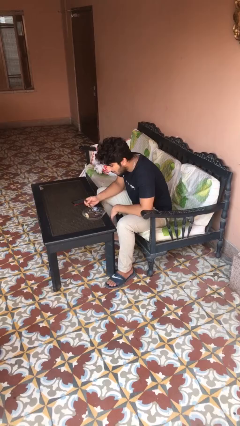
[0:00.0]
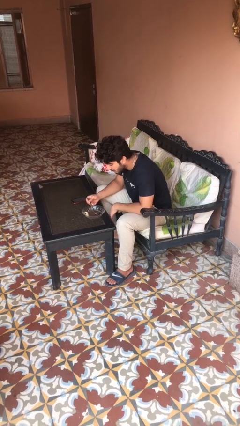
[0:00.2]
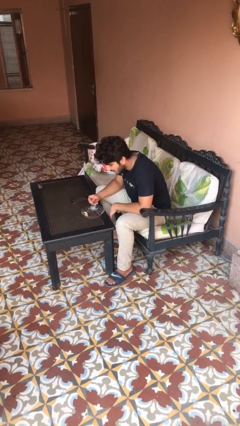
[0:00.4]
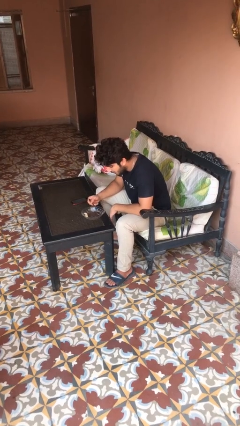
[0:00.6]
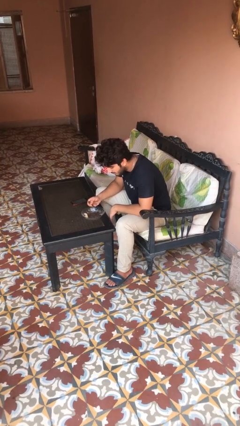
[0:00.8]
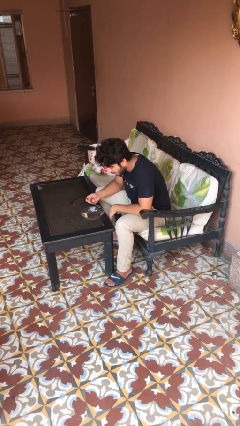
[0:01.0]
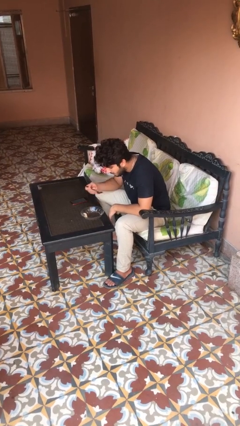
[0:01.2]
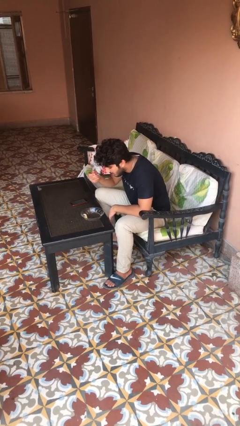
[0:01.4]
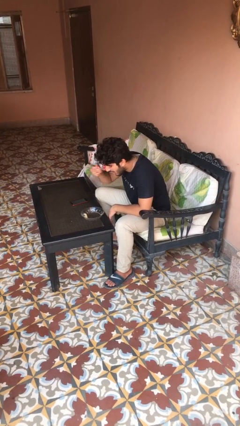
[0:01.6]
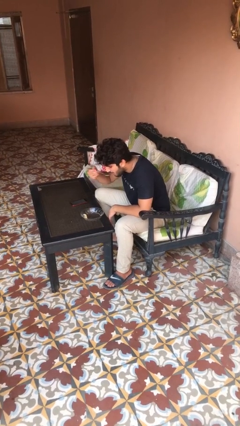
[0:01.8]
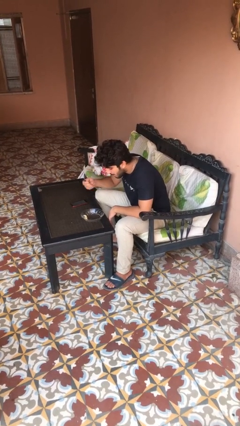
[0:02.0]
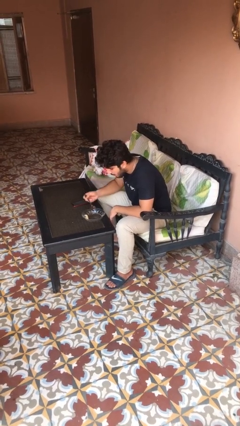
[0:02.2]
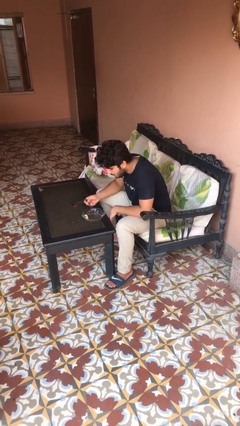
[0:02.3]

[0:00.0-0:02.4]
person eats with utensil

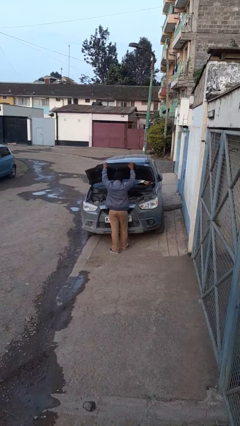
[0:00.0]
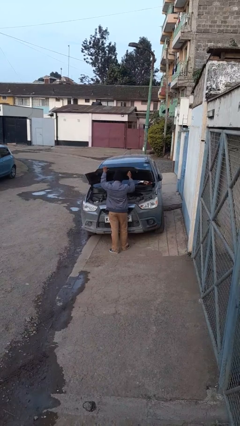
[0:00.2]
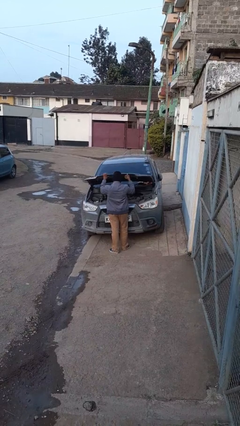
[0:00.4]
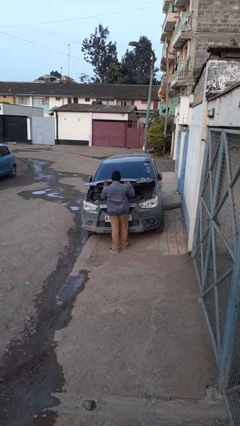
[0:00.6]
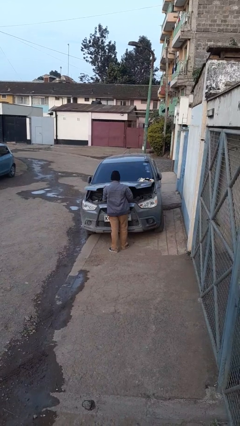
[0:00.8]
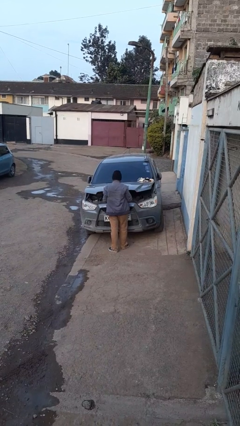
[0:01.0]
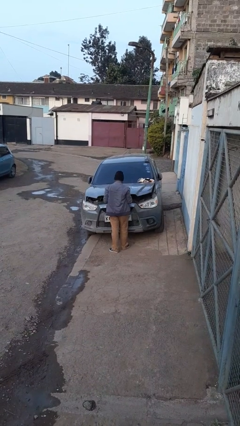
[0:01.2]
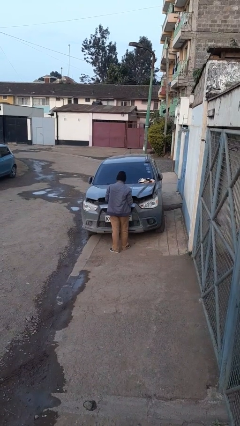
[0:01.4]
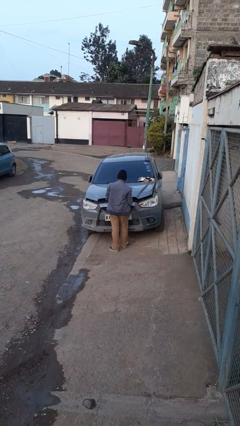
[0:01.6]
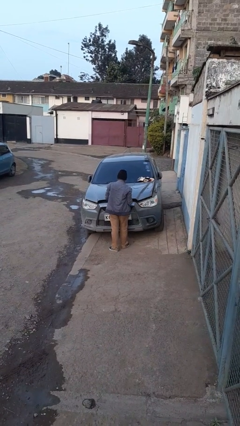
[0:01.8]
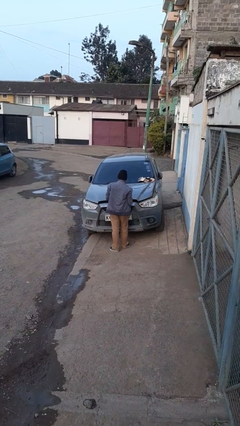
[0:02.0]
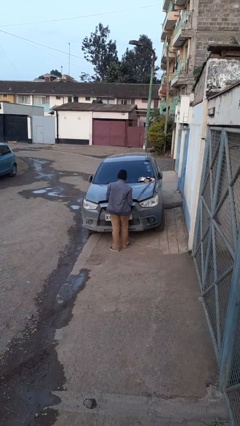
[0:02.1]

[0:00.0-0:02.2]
person closes car hood

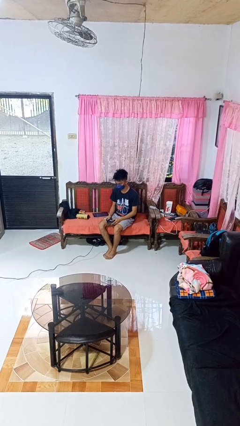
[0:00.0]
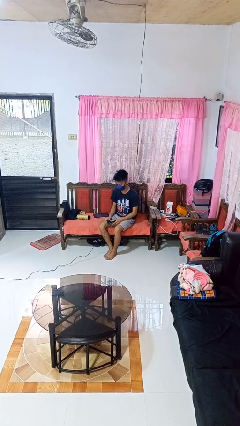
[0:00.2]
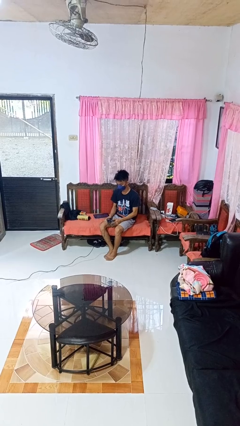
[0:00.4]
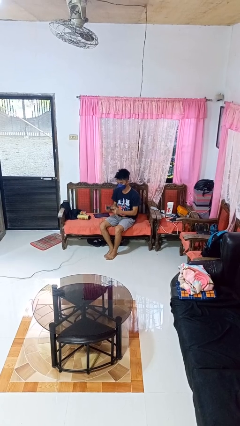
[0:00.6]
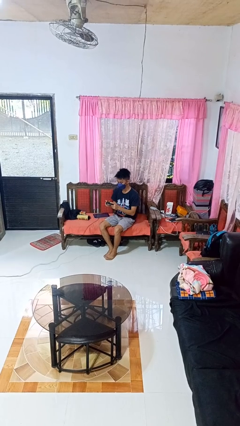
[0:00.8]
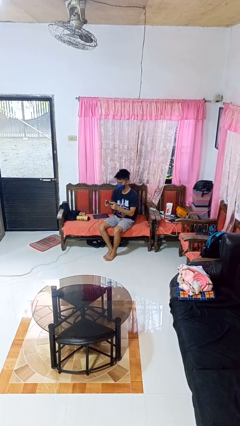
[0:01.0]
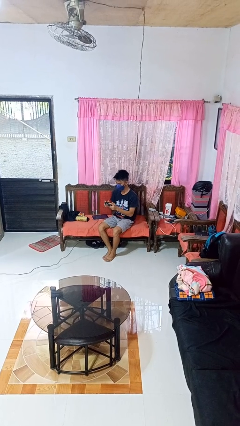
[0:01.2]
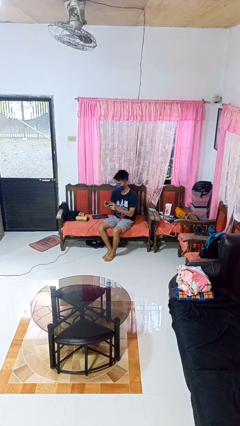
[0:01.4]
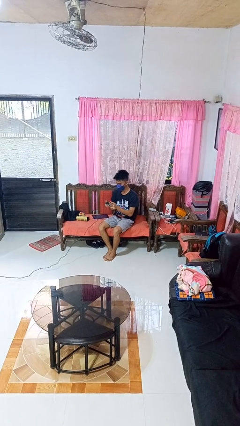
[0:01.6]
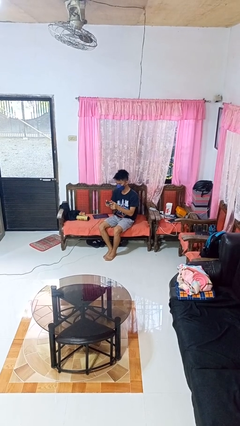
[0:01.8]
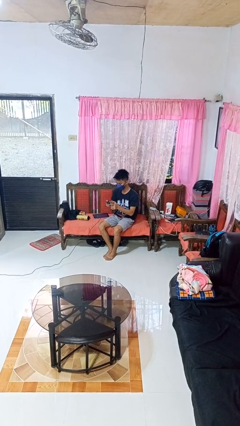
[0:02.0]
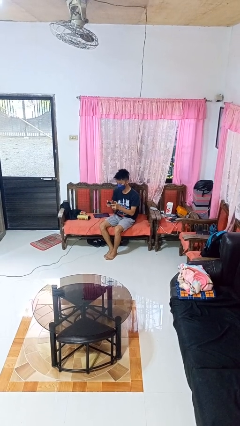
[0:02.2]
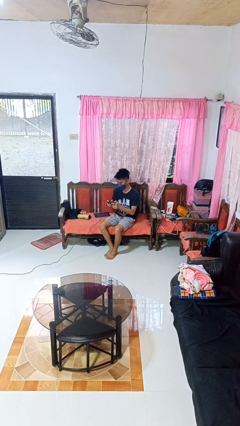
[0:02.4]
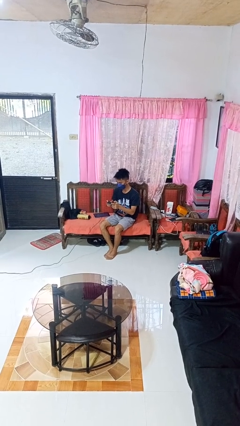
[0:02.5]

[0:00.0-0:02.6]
person interacts with handheld game

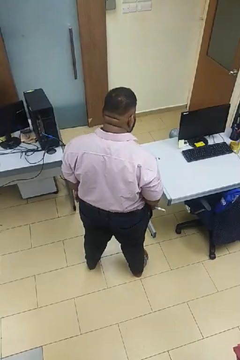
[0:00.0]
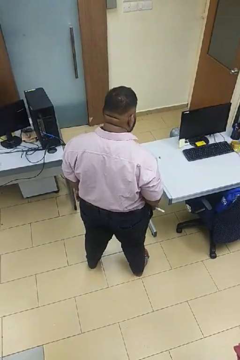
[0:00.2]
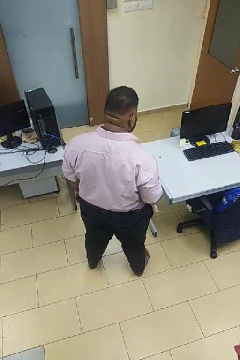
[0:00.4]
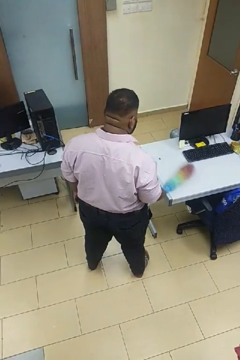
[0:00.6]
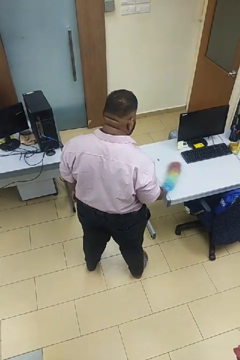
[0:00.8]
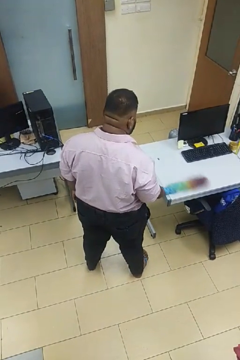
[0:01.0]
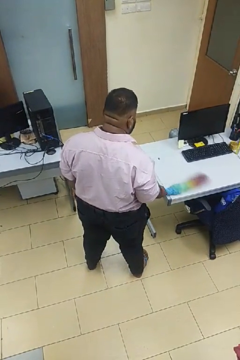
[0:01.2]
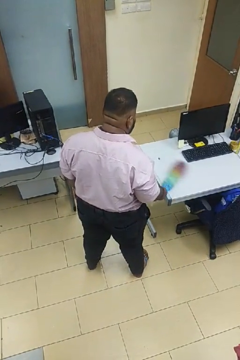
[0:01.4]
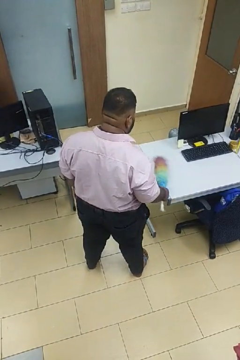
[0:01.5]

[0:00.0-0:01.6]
person dusts furniture

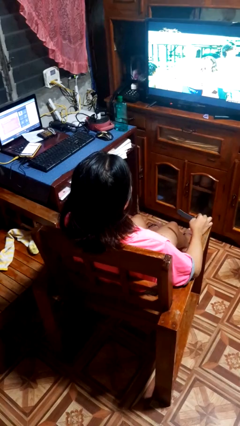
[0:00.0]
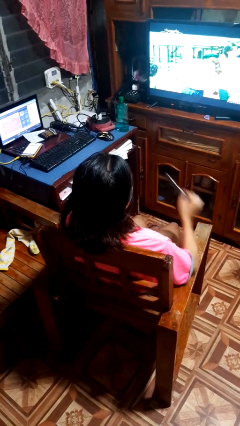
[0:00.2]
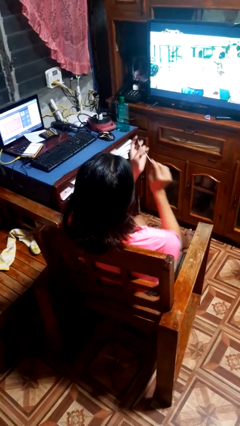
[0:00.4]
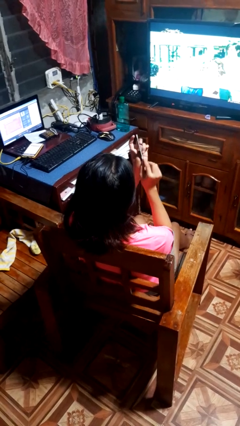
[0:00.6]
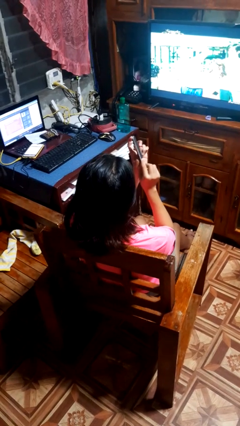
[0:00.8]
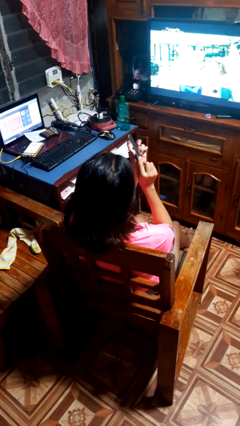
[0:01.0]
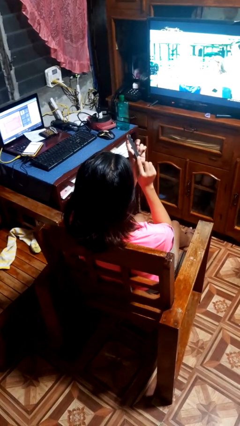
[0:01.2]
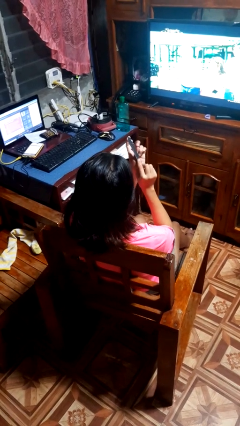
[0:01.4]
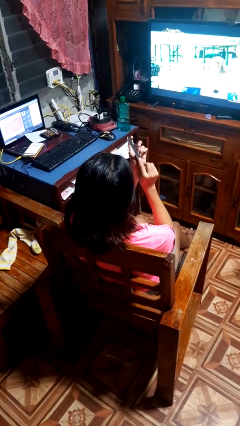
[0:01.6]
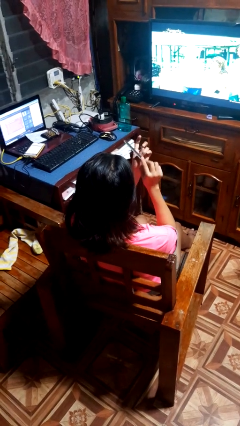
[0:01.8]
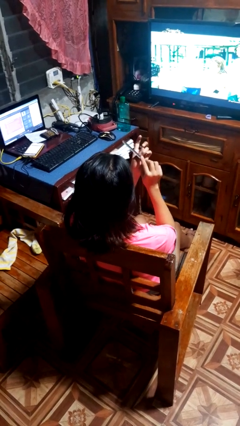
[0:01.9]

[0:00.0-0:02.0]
person files fingernails

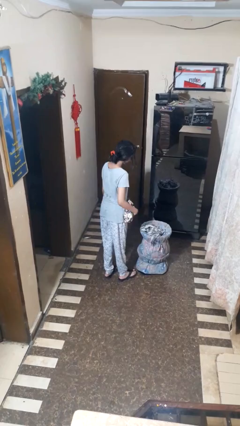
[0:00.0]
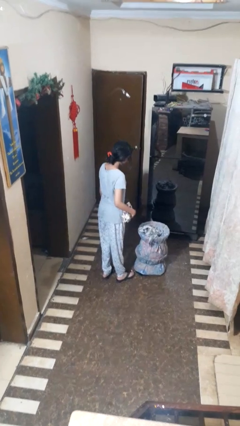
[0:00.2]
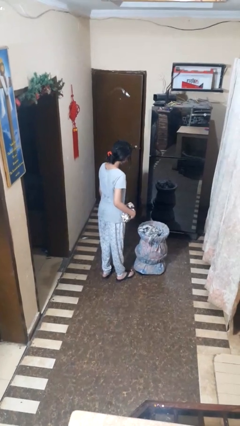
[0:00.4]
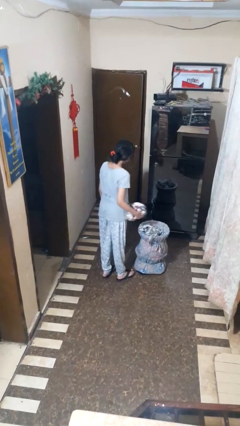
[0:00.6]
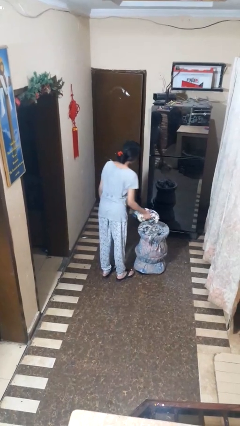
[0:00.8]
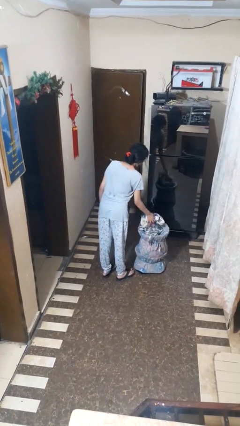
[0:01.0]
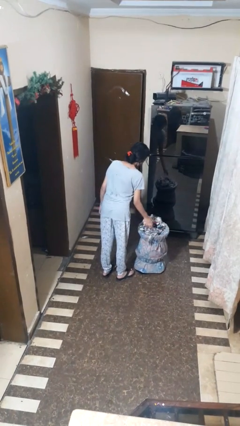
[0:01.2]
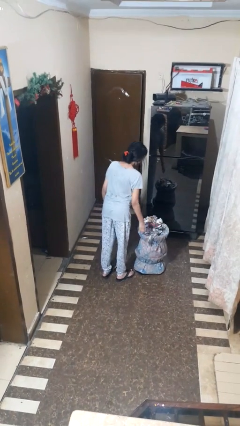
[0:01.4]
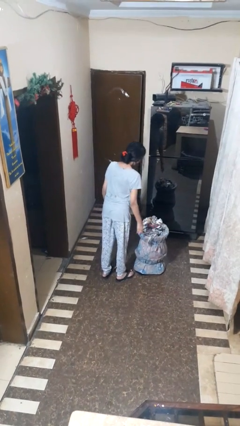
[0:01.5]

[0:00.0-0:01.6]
person puts object into basket

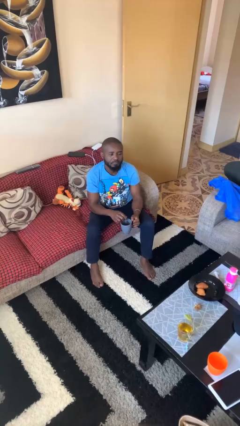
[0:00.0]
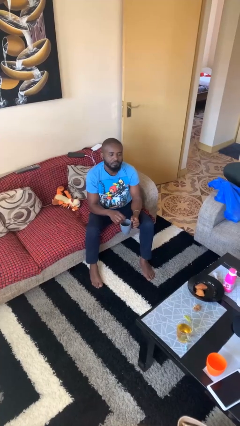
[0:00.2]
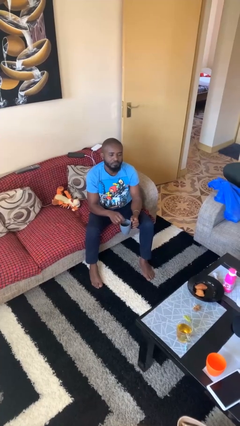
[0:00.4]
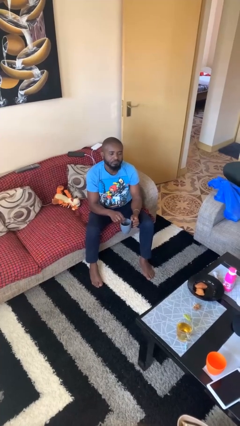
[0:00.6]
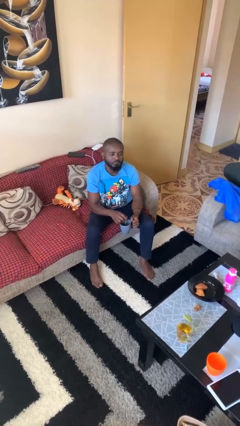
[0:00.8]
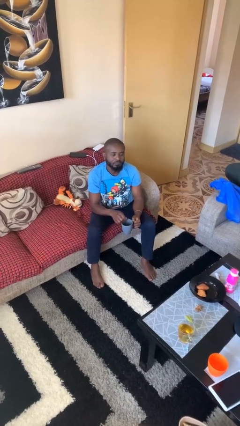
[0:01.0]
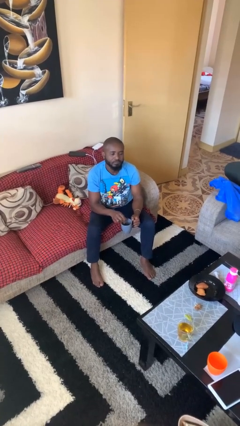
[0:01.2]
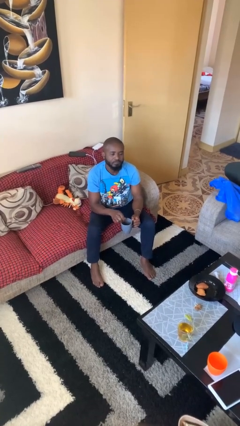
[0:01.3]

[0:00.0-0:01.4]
person stirs mug

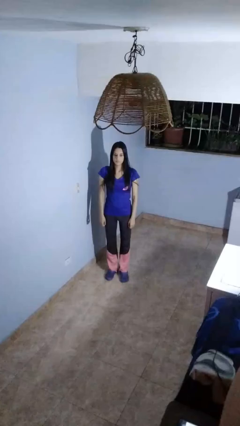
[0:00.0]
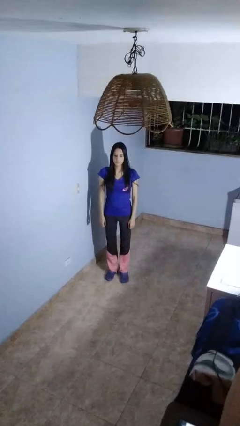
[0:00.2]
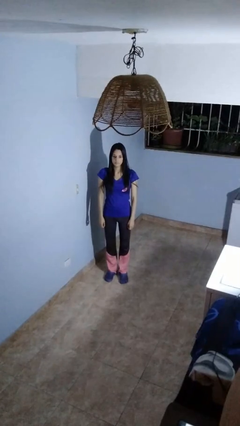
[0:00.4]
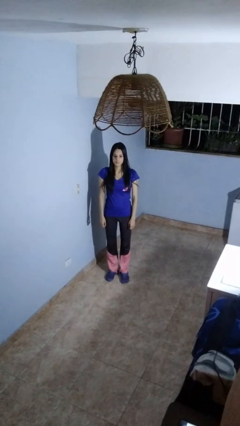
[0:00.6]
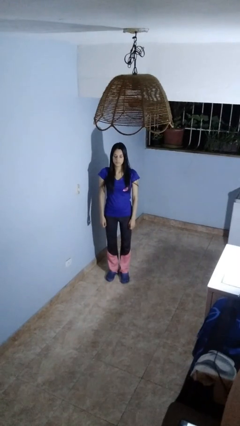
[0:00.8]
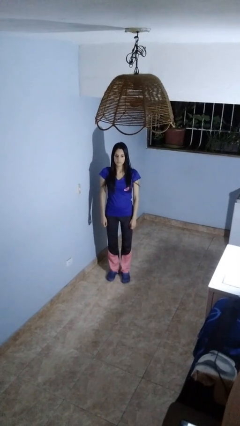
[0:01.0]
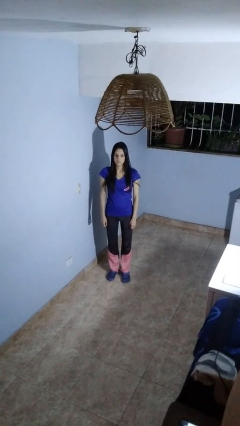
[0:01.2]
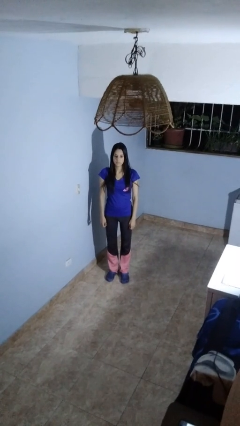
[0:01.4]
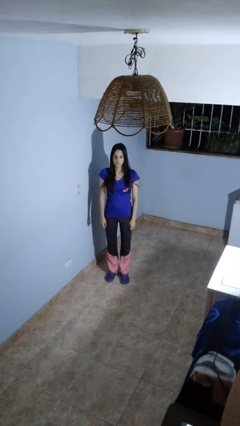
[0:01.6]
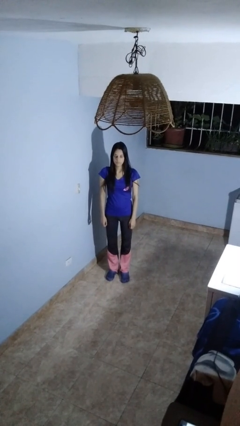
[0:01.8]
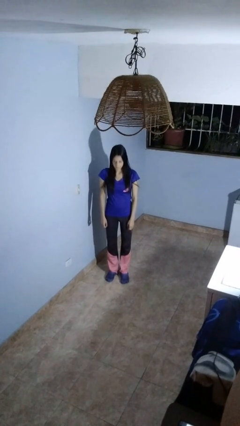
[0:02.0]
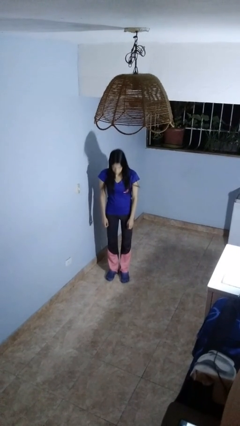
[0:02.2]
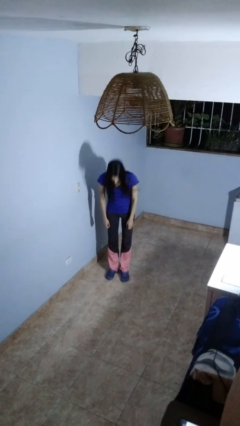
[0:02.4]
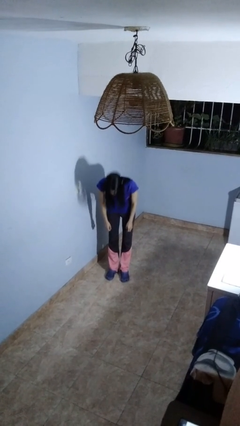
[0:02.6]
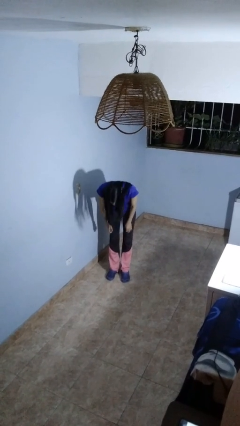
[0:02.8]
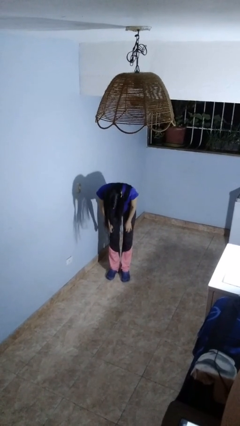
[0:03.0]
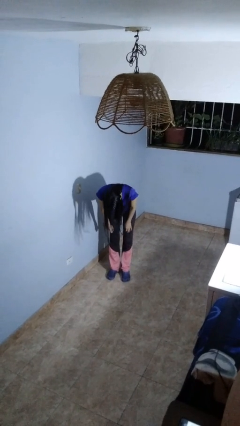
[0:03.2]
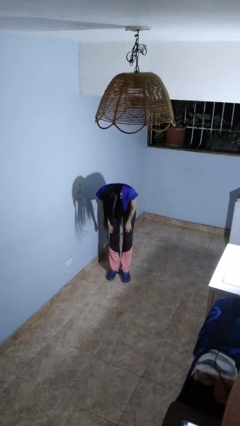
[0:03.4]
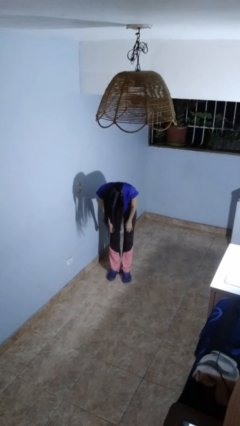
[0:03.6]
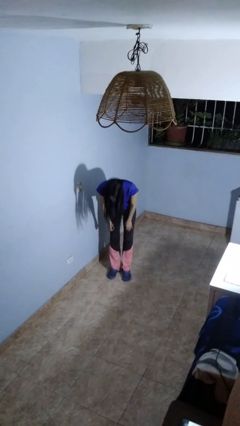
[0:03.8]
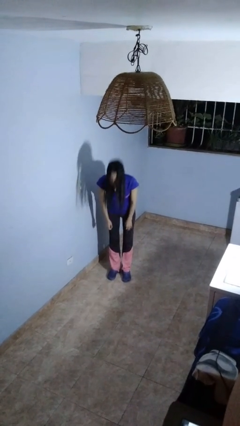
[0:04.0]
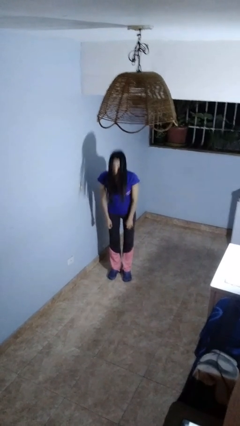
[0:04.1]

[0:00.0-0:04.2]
person bows
